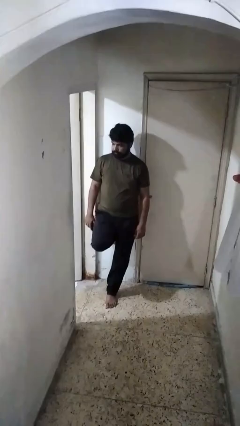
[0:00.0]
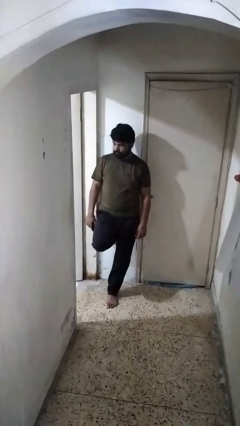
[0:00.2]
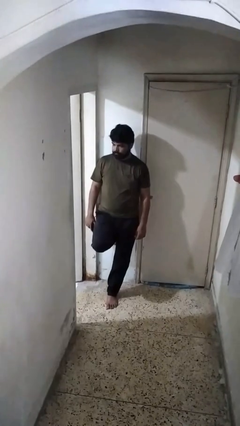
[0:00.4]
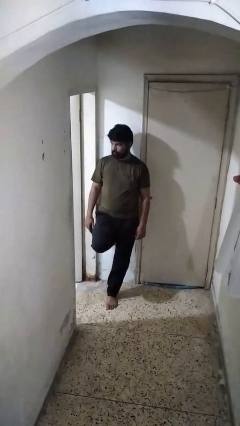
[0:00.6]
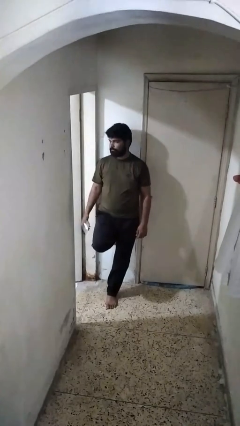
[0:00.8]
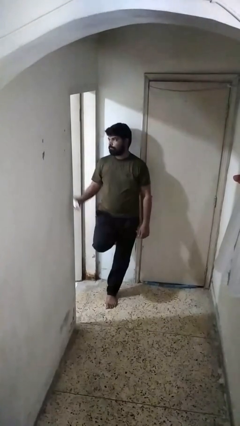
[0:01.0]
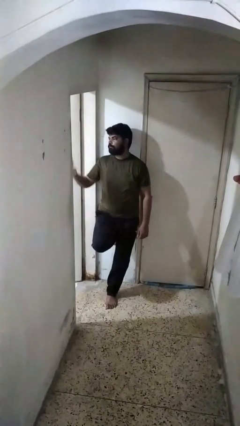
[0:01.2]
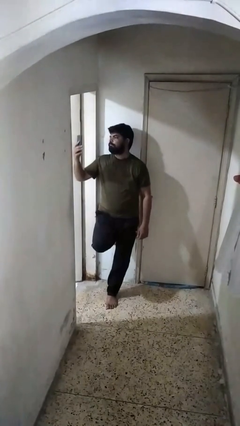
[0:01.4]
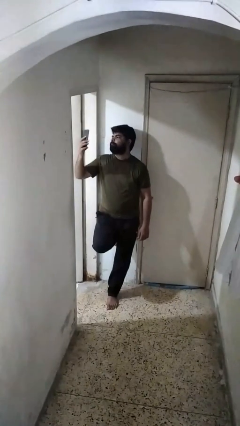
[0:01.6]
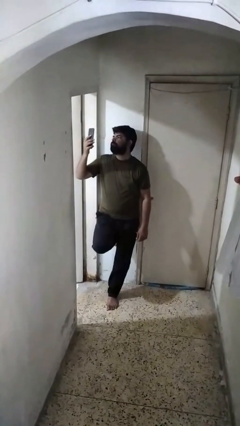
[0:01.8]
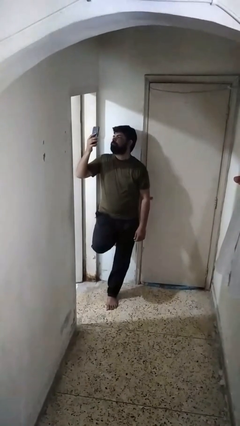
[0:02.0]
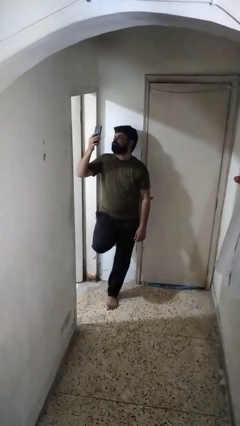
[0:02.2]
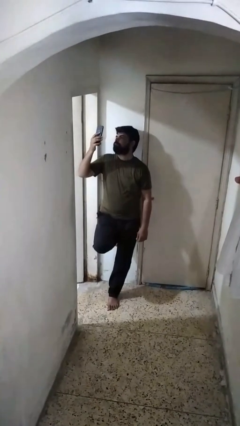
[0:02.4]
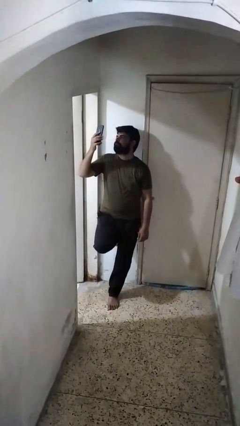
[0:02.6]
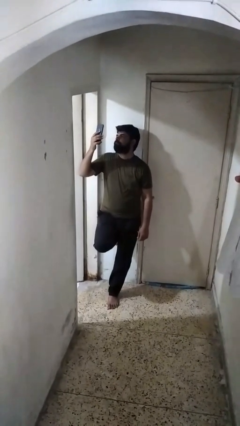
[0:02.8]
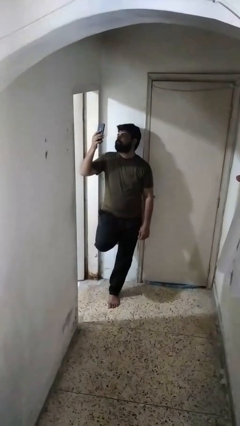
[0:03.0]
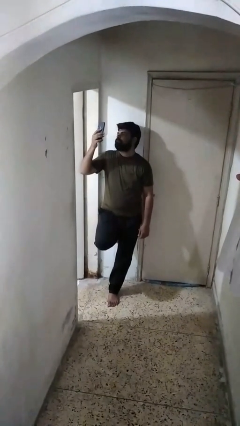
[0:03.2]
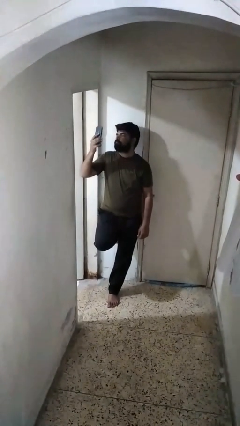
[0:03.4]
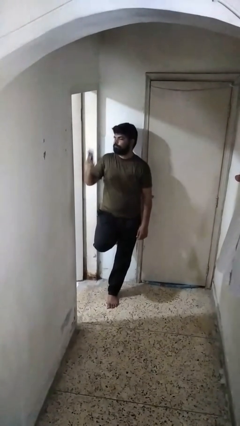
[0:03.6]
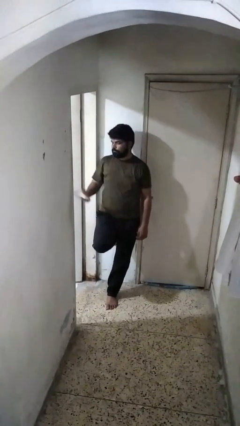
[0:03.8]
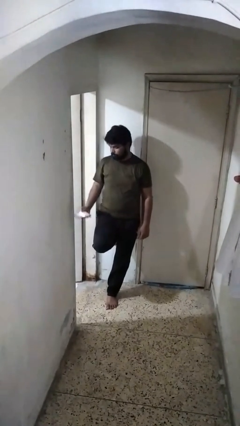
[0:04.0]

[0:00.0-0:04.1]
person takes selfie

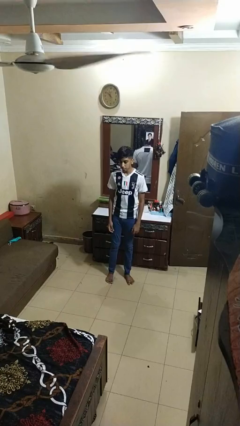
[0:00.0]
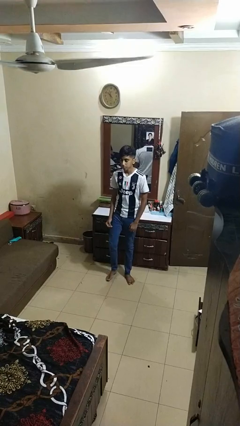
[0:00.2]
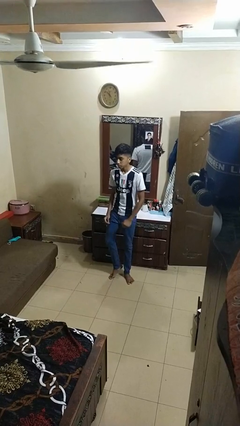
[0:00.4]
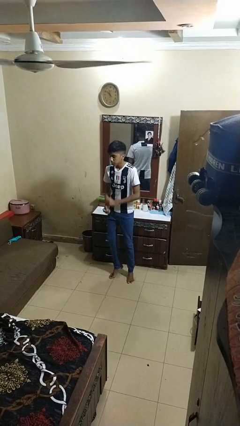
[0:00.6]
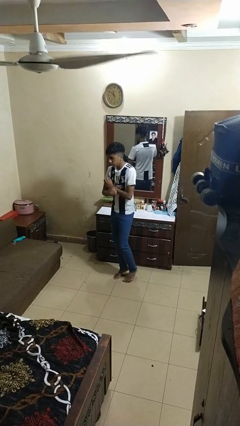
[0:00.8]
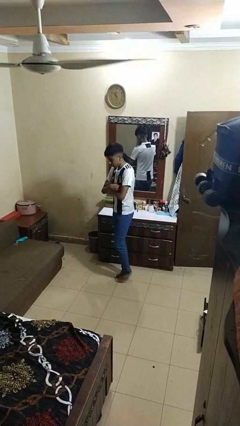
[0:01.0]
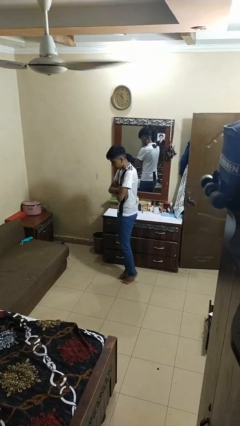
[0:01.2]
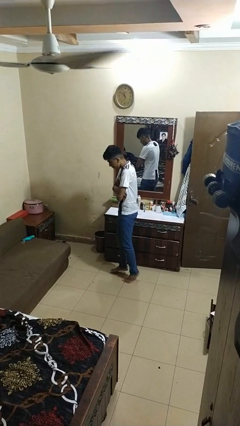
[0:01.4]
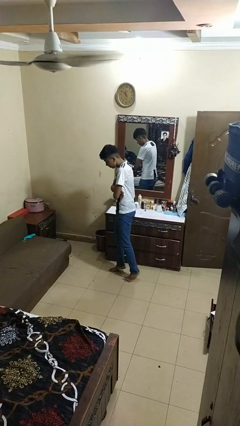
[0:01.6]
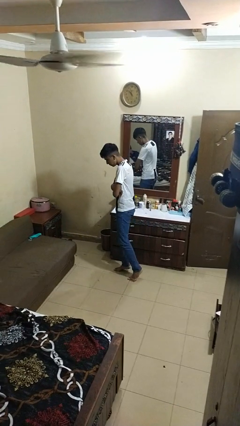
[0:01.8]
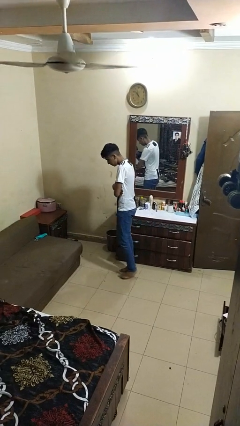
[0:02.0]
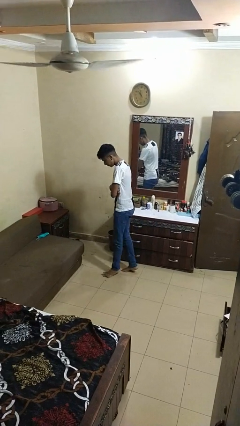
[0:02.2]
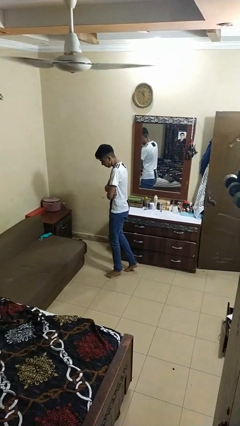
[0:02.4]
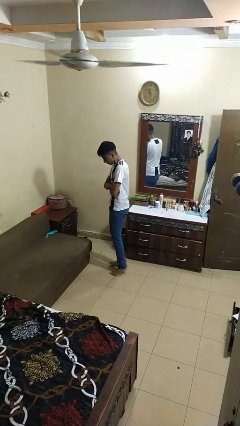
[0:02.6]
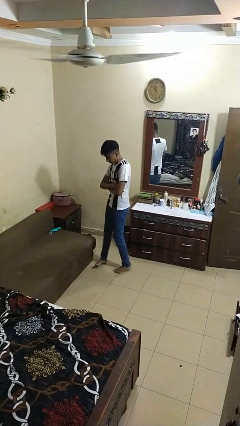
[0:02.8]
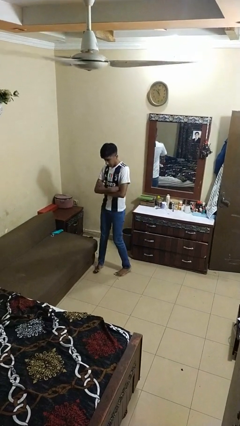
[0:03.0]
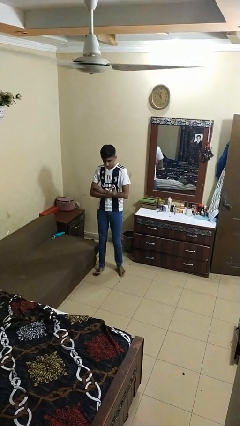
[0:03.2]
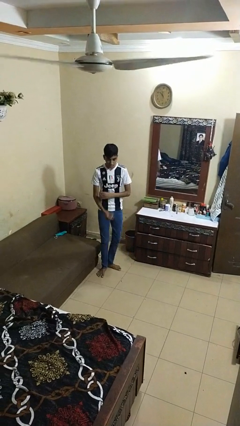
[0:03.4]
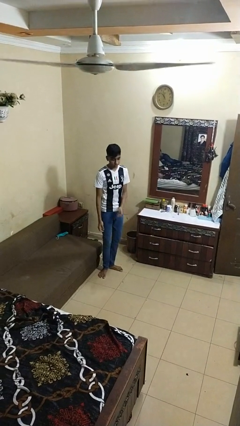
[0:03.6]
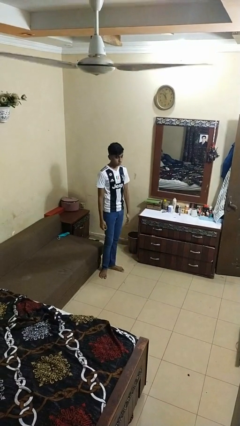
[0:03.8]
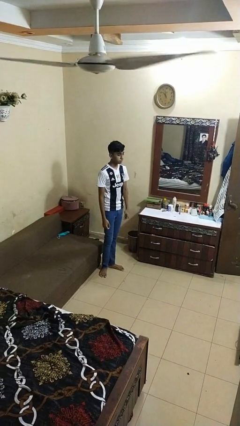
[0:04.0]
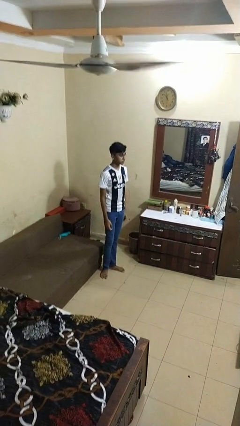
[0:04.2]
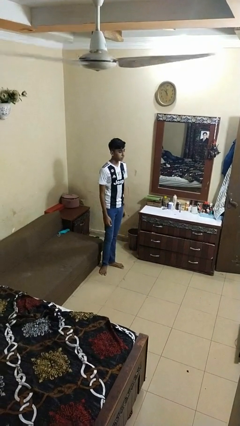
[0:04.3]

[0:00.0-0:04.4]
person walks tiptoe

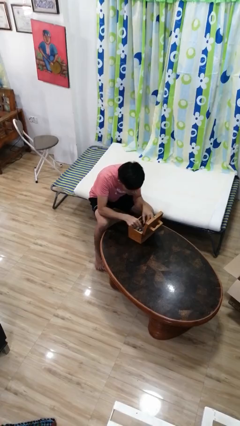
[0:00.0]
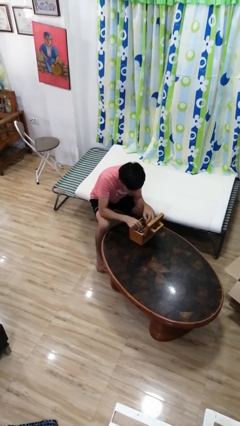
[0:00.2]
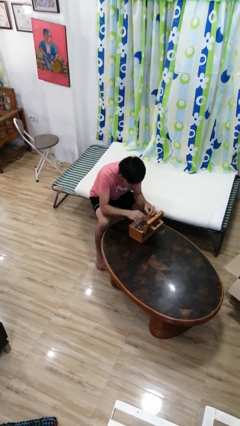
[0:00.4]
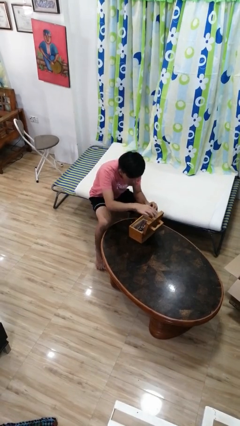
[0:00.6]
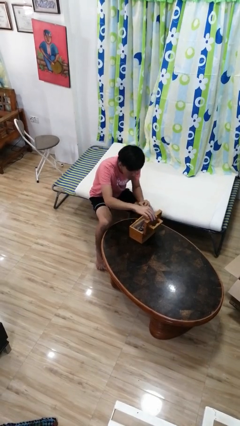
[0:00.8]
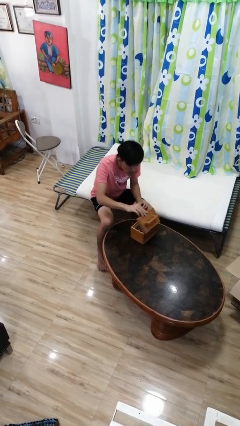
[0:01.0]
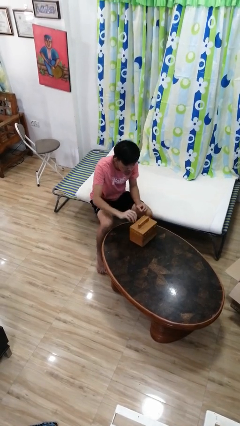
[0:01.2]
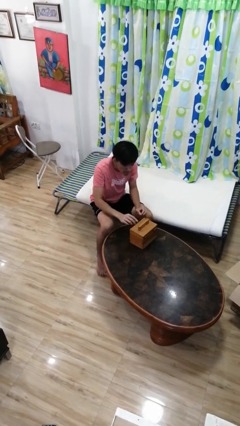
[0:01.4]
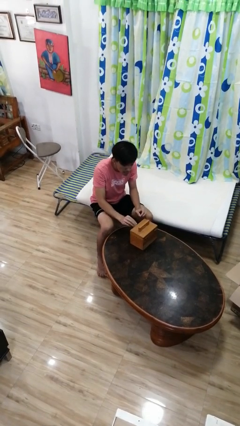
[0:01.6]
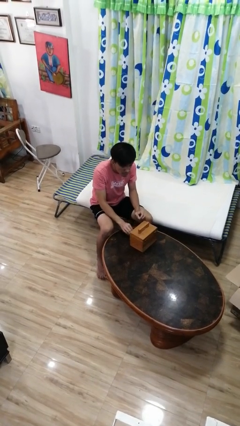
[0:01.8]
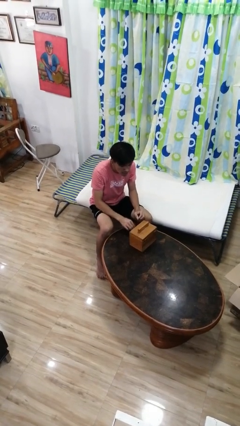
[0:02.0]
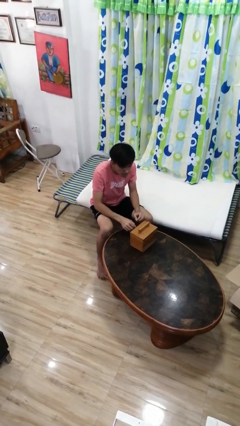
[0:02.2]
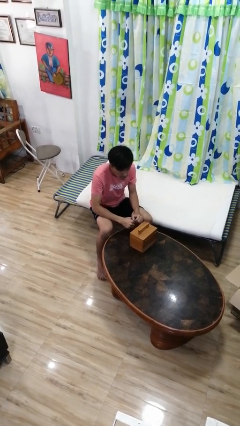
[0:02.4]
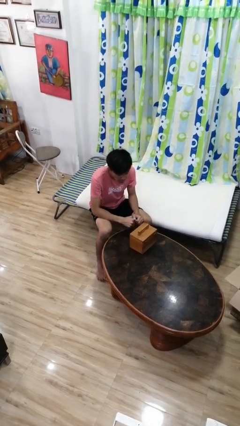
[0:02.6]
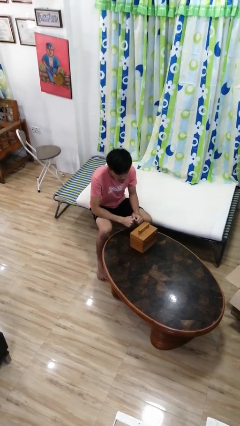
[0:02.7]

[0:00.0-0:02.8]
person closes jewelry box

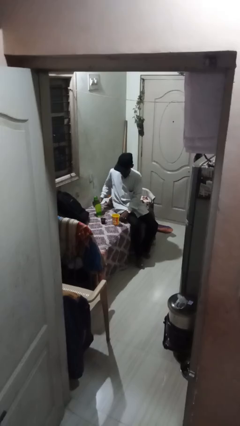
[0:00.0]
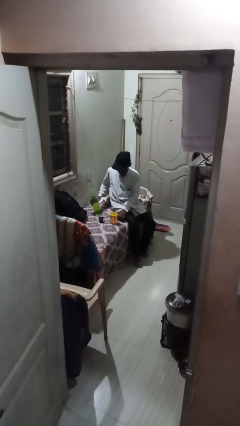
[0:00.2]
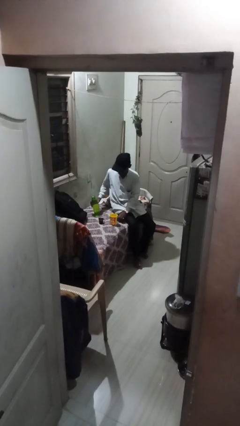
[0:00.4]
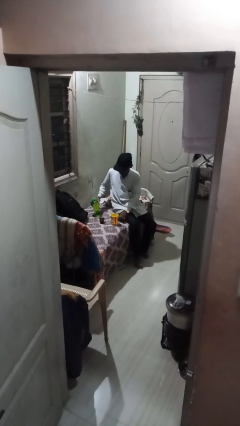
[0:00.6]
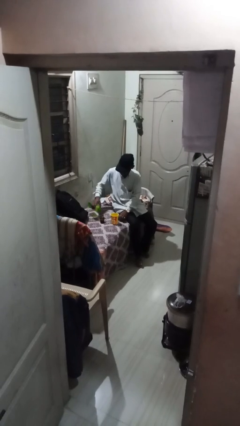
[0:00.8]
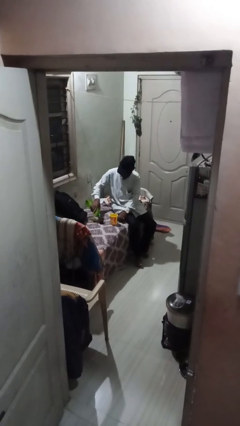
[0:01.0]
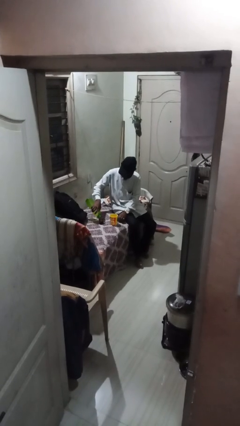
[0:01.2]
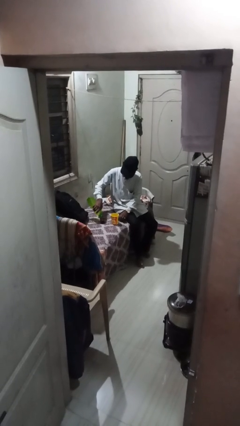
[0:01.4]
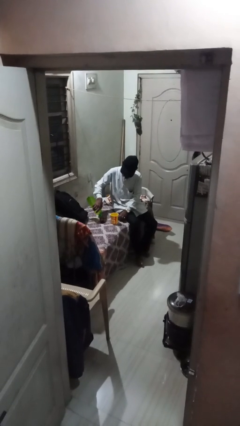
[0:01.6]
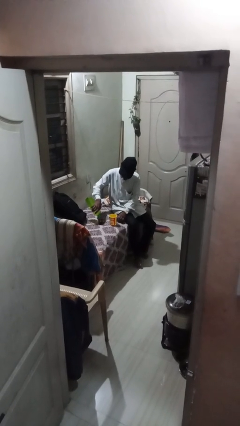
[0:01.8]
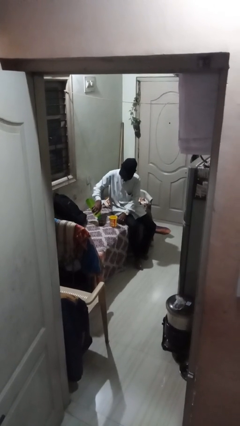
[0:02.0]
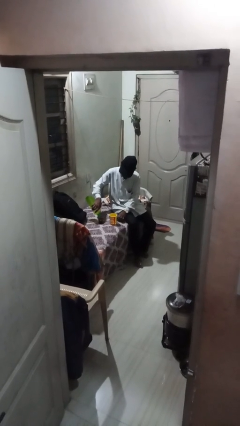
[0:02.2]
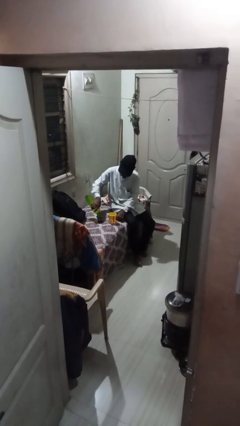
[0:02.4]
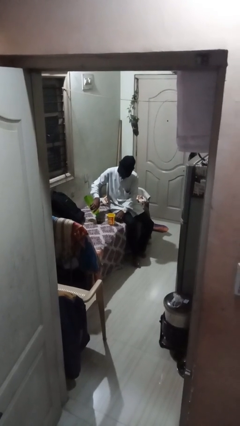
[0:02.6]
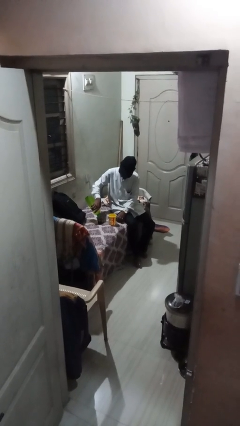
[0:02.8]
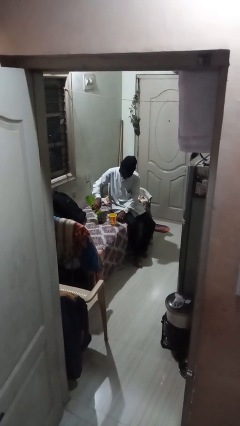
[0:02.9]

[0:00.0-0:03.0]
person pours liquid into cup

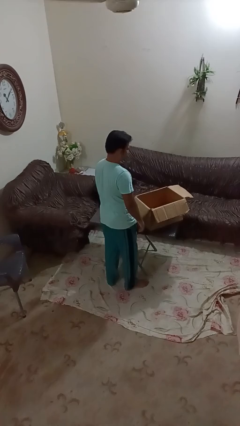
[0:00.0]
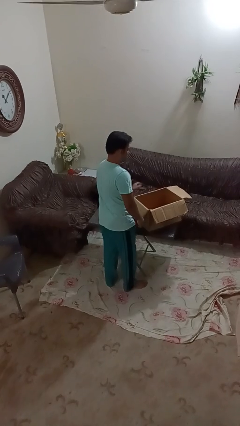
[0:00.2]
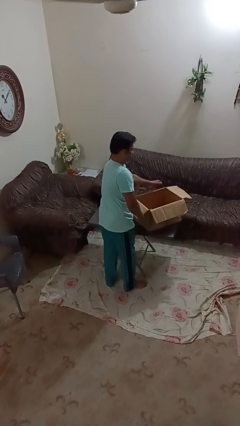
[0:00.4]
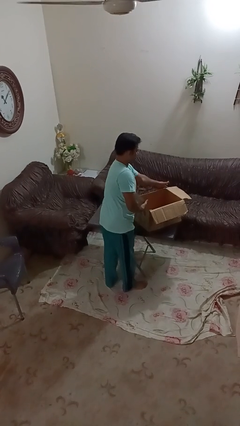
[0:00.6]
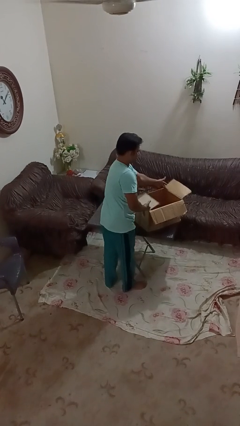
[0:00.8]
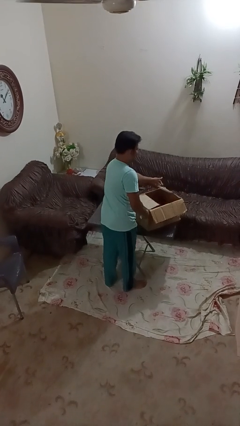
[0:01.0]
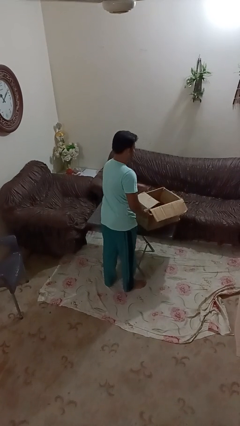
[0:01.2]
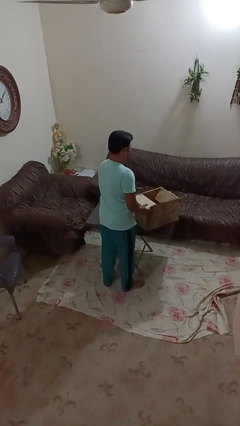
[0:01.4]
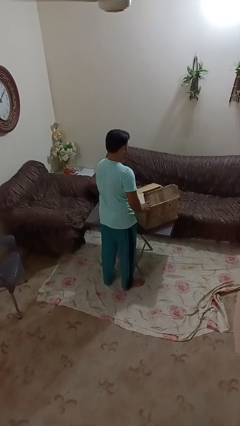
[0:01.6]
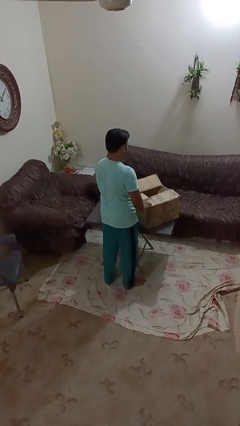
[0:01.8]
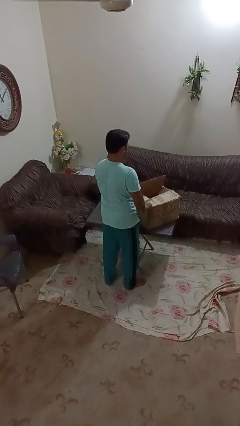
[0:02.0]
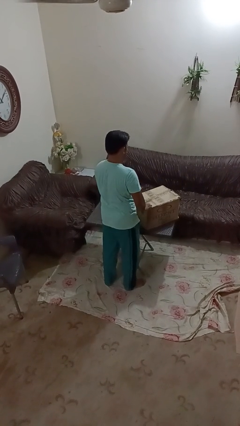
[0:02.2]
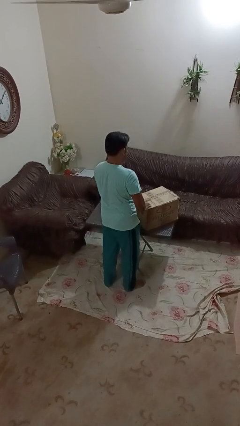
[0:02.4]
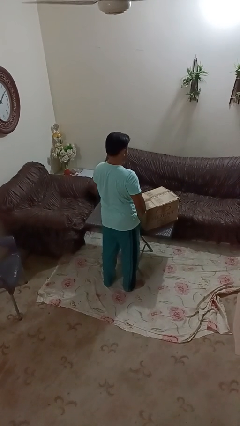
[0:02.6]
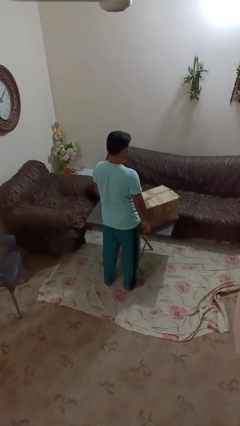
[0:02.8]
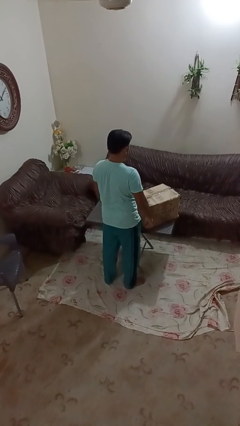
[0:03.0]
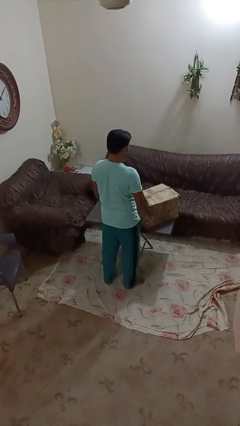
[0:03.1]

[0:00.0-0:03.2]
person closes box
